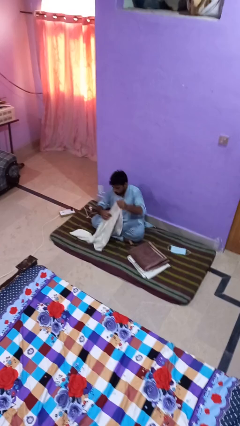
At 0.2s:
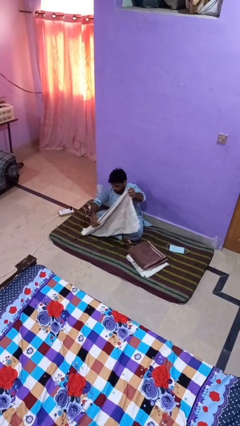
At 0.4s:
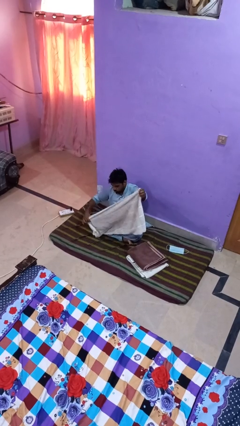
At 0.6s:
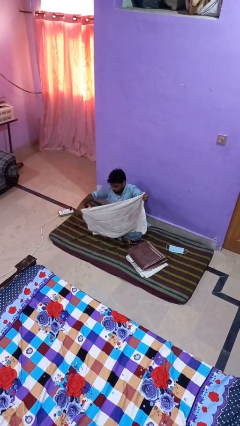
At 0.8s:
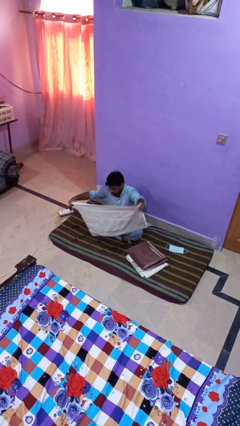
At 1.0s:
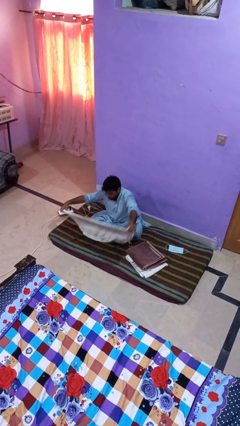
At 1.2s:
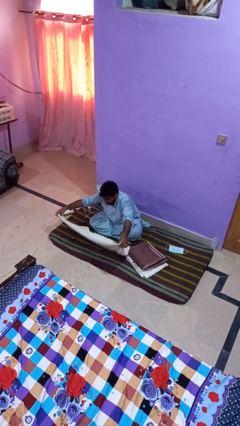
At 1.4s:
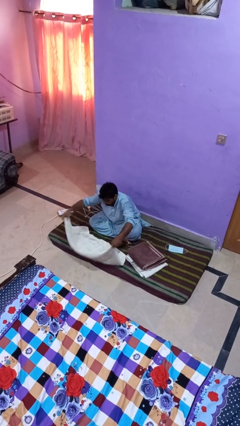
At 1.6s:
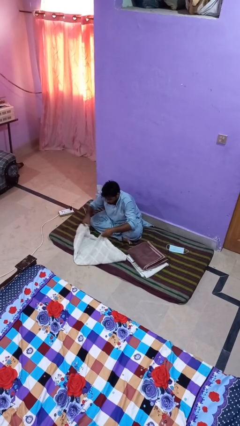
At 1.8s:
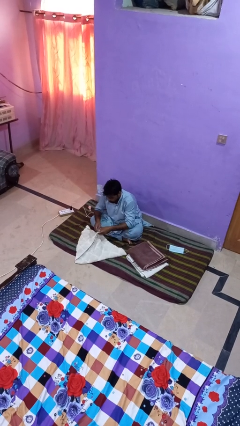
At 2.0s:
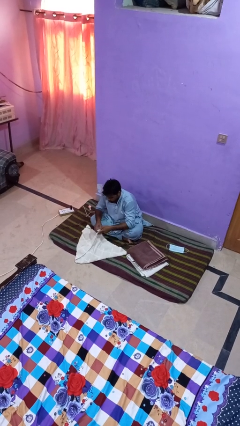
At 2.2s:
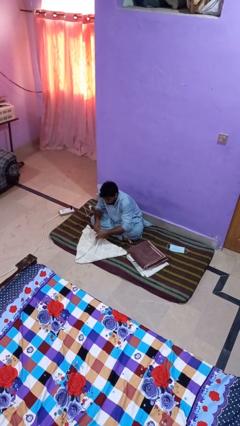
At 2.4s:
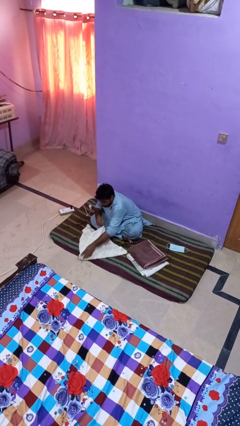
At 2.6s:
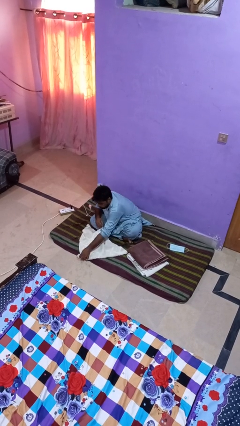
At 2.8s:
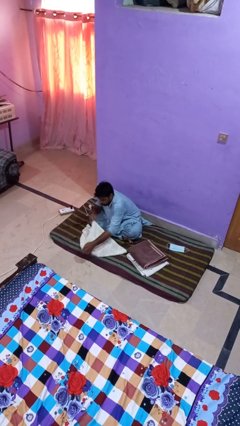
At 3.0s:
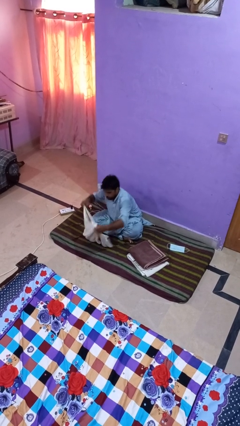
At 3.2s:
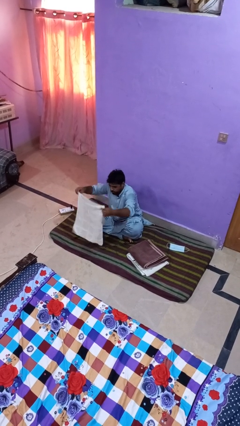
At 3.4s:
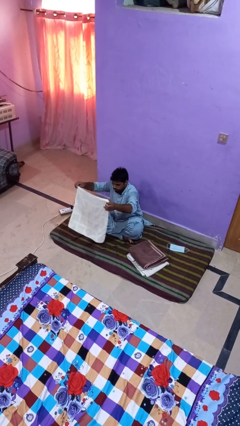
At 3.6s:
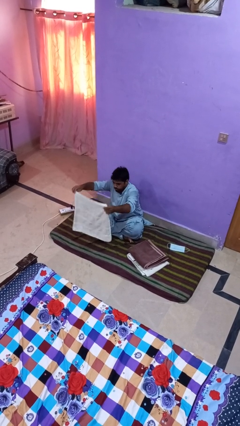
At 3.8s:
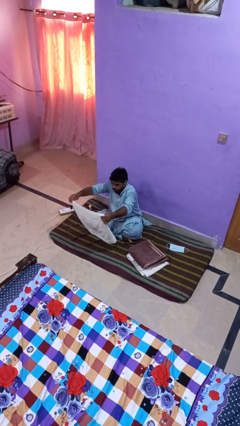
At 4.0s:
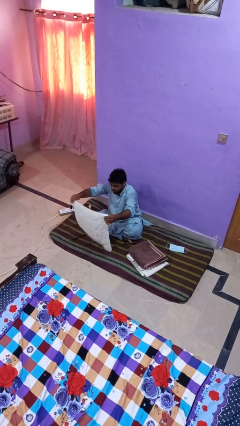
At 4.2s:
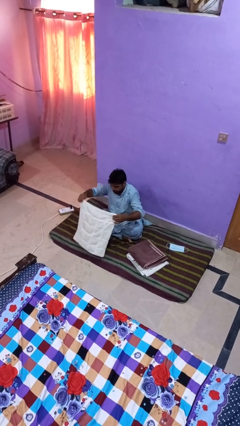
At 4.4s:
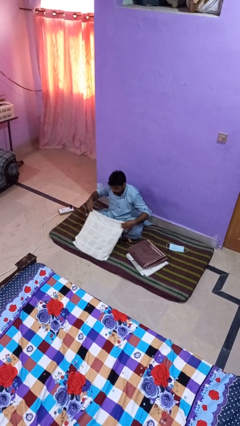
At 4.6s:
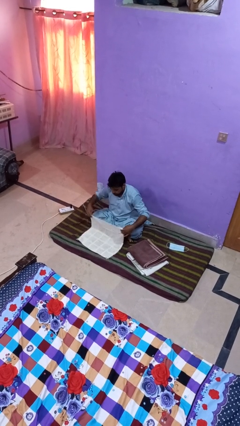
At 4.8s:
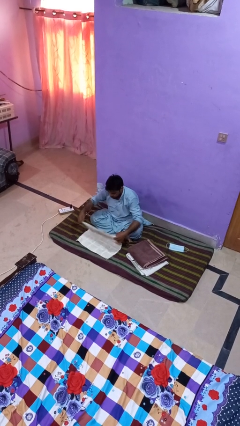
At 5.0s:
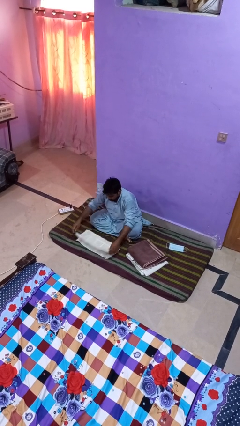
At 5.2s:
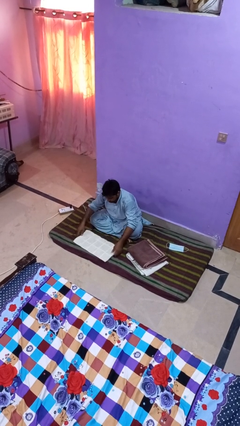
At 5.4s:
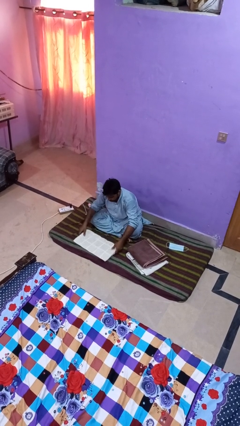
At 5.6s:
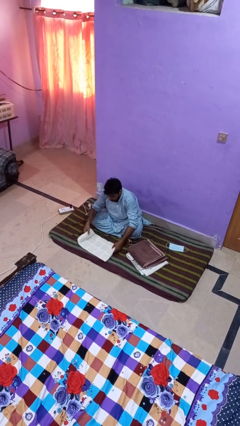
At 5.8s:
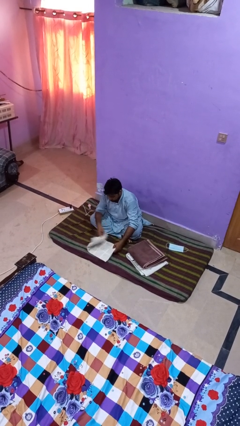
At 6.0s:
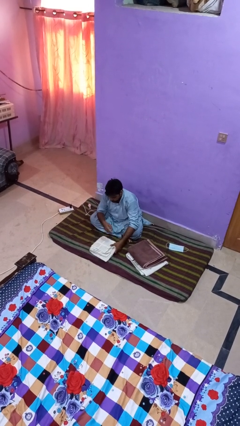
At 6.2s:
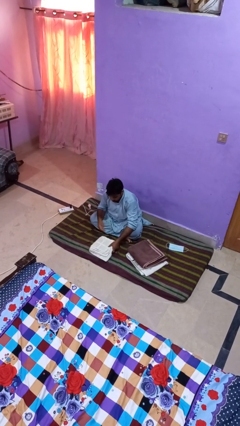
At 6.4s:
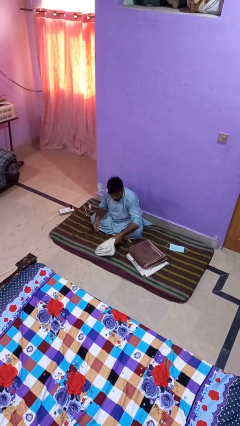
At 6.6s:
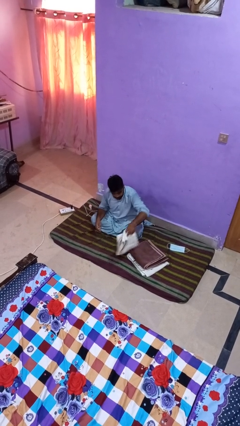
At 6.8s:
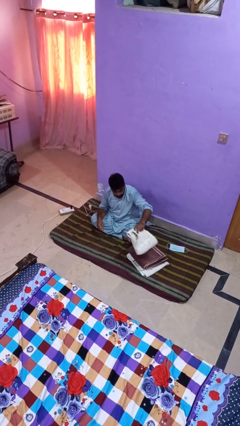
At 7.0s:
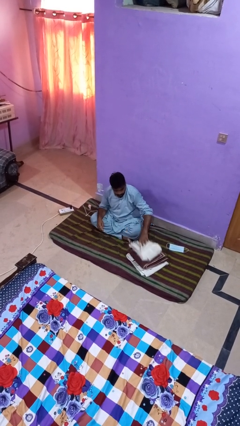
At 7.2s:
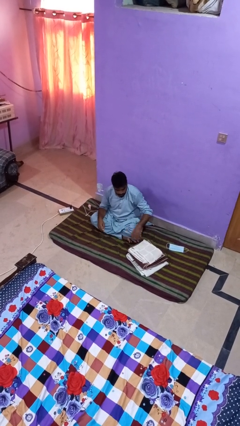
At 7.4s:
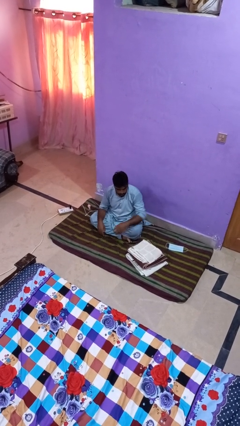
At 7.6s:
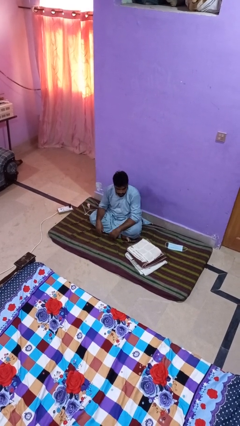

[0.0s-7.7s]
person folds towel

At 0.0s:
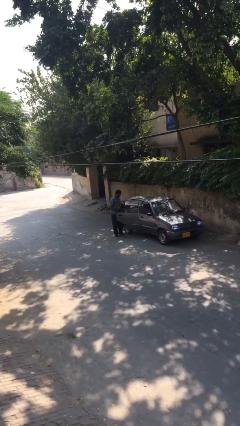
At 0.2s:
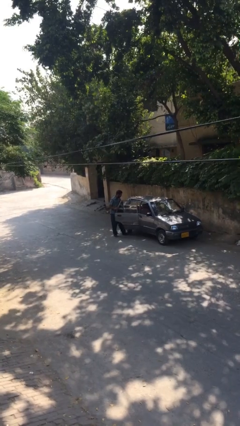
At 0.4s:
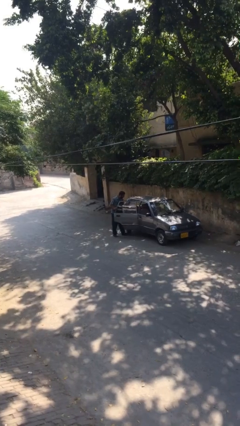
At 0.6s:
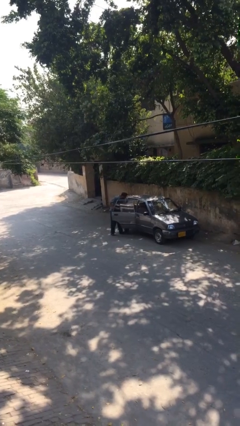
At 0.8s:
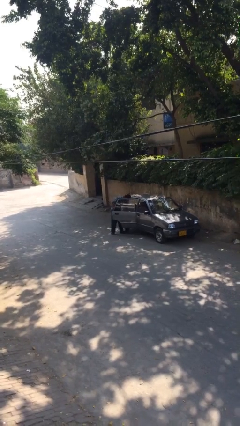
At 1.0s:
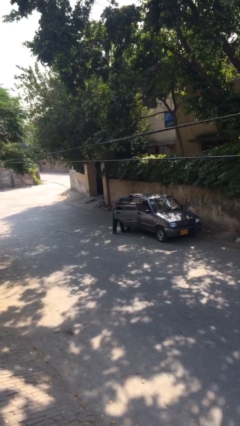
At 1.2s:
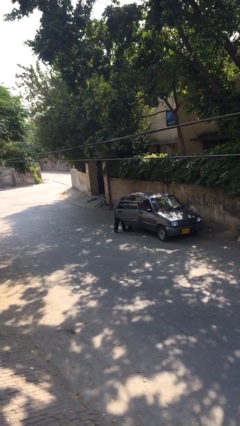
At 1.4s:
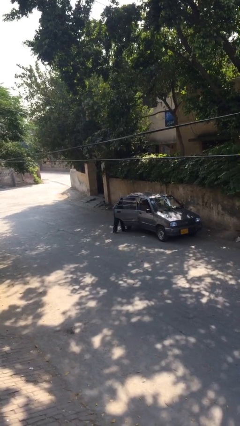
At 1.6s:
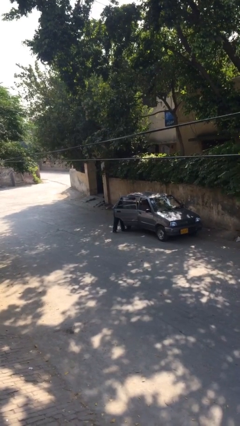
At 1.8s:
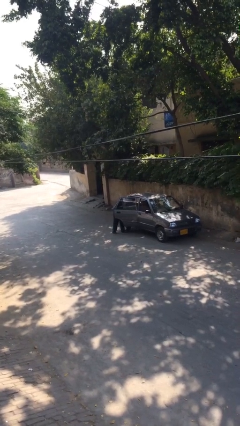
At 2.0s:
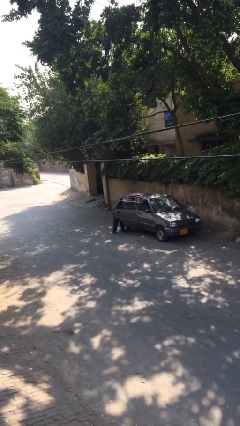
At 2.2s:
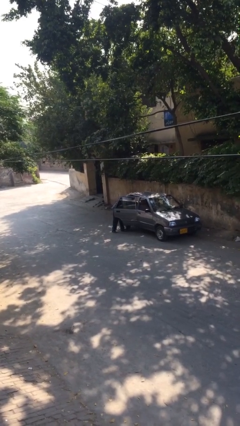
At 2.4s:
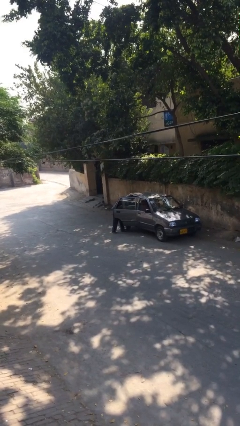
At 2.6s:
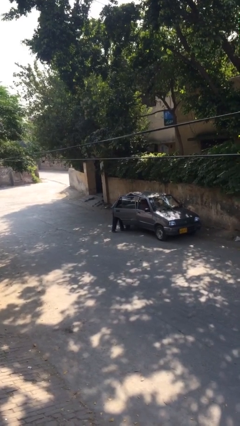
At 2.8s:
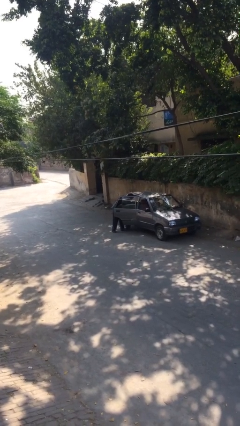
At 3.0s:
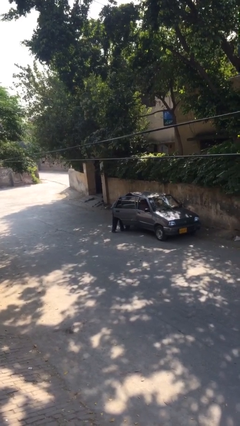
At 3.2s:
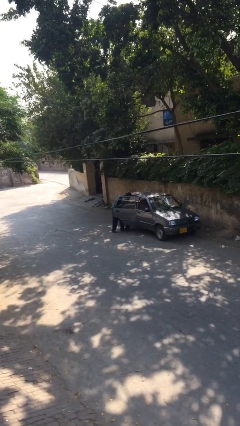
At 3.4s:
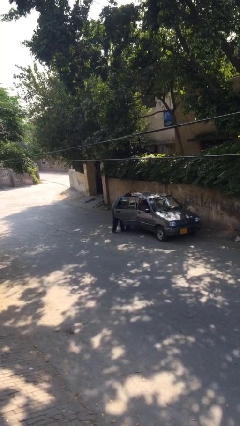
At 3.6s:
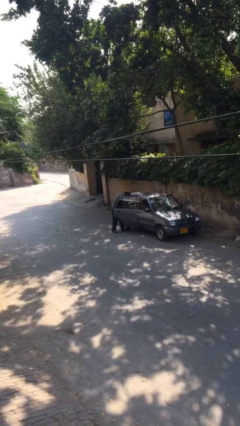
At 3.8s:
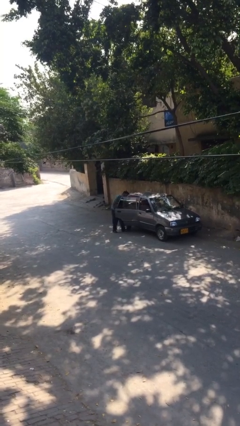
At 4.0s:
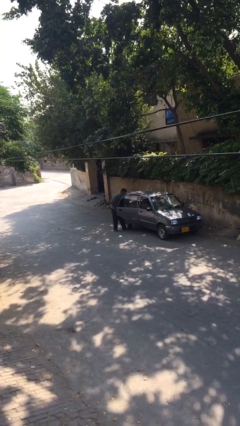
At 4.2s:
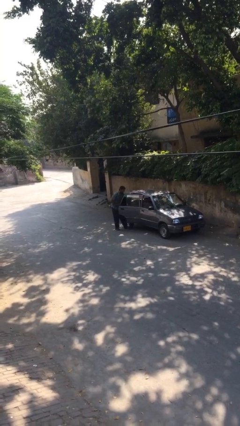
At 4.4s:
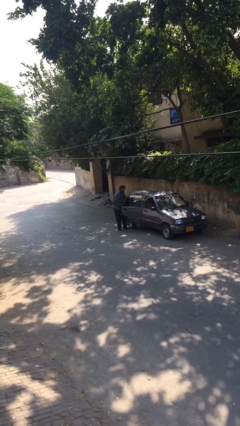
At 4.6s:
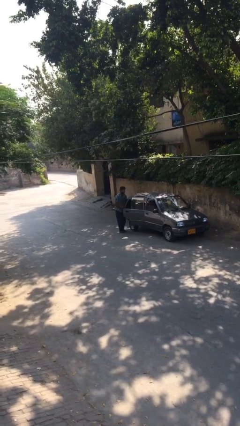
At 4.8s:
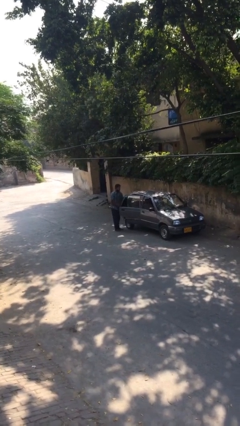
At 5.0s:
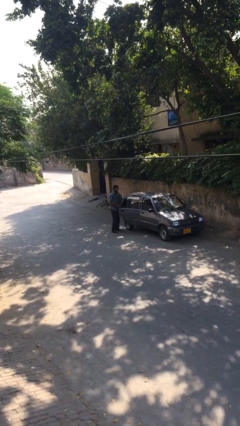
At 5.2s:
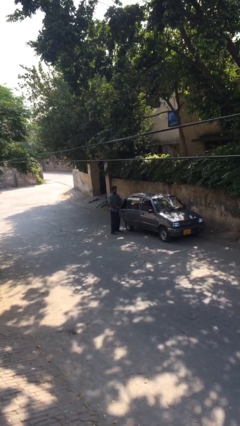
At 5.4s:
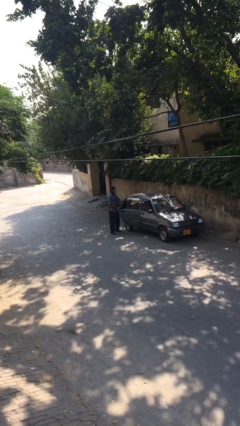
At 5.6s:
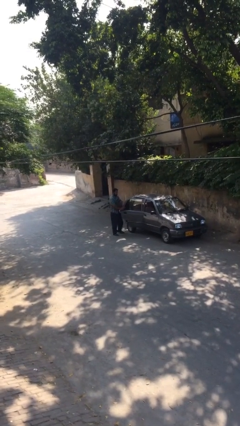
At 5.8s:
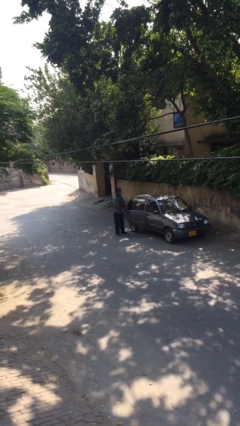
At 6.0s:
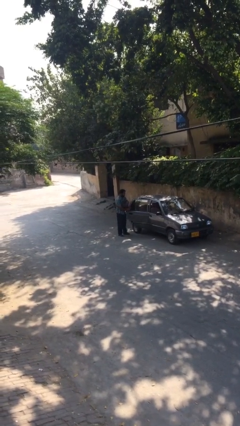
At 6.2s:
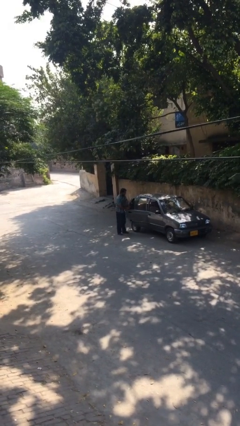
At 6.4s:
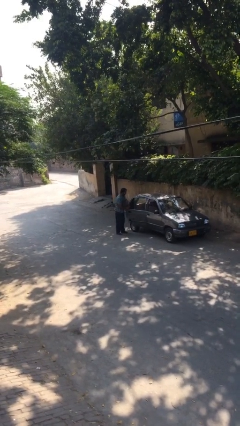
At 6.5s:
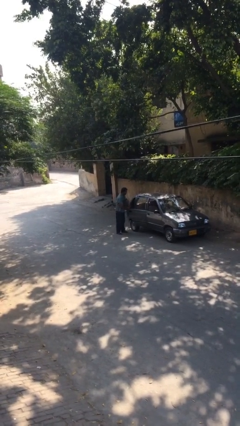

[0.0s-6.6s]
person unloads car

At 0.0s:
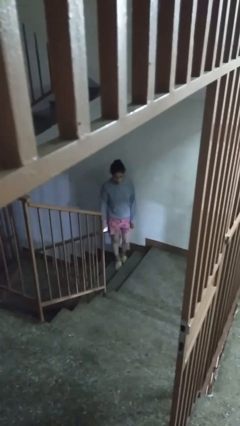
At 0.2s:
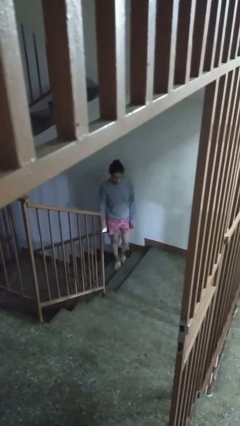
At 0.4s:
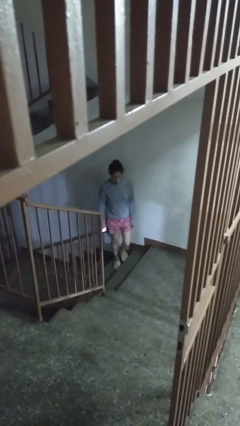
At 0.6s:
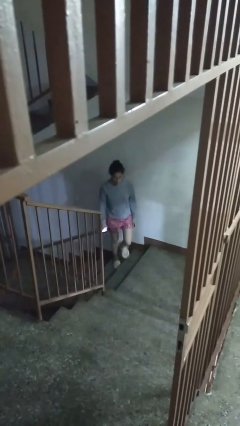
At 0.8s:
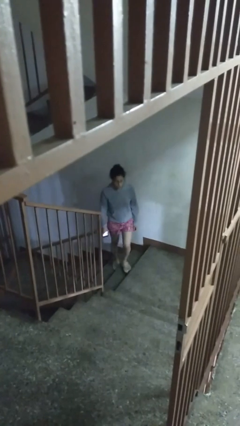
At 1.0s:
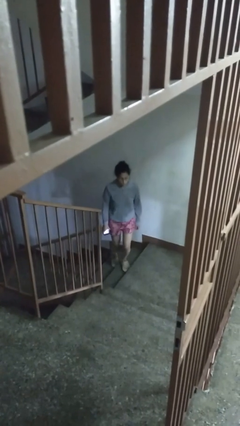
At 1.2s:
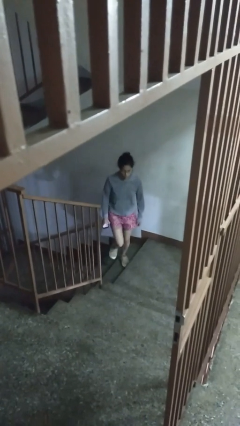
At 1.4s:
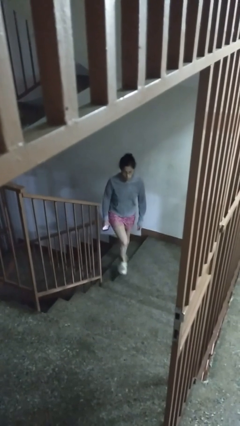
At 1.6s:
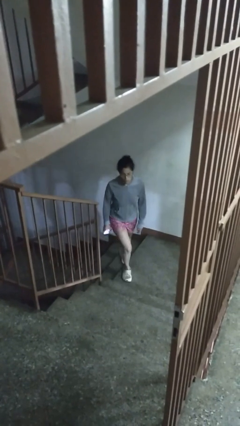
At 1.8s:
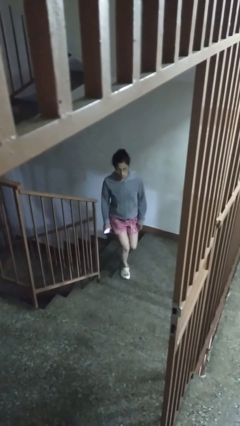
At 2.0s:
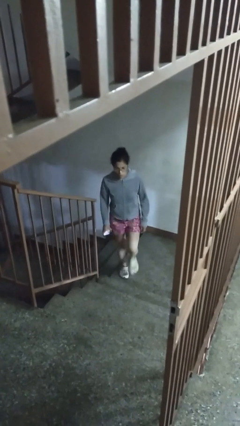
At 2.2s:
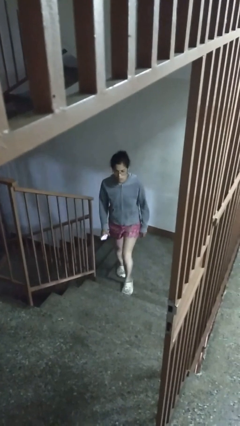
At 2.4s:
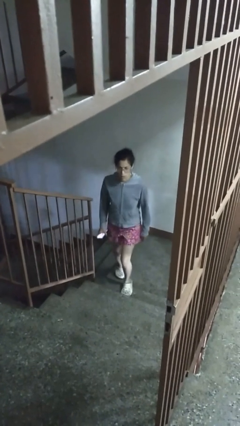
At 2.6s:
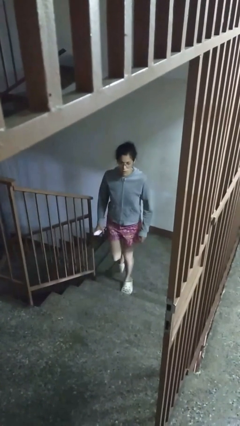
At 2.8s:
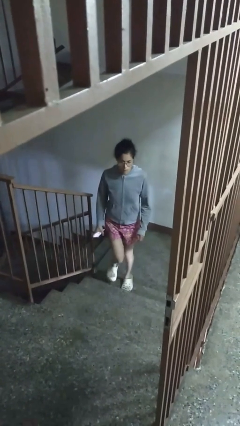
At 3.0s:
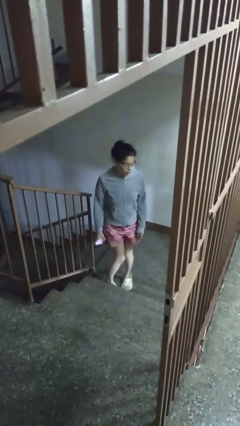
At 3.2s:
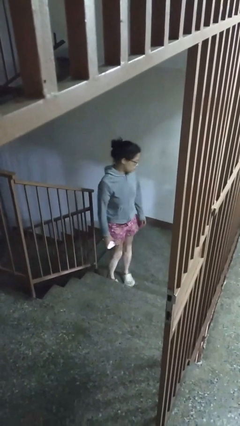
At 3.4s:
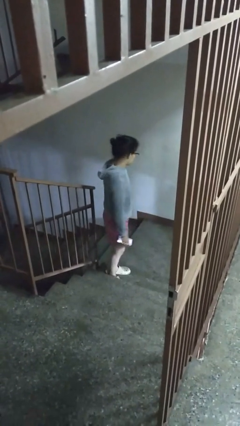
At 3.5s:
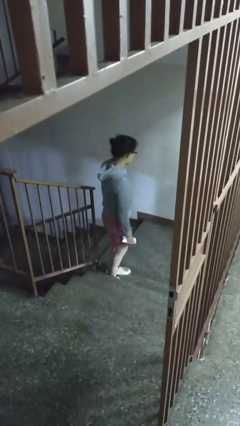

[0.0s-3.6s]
person climbs up stairs

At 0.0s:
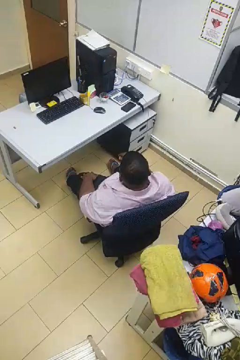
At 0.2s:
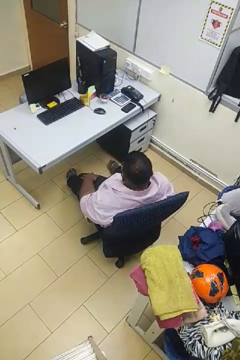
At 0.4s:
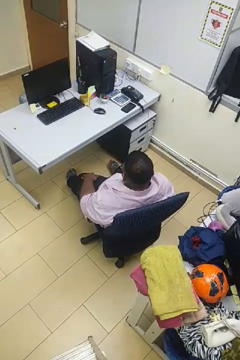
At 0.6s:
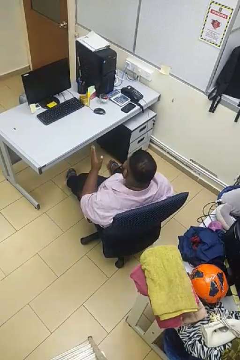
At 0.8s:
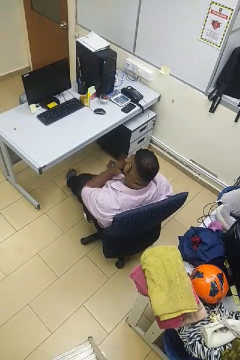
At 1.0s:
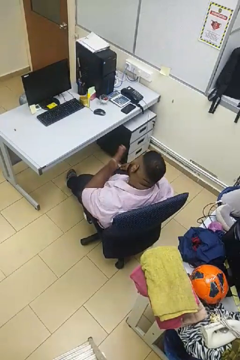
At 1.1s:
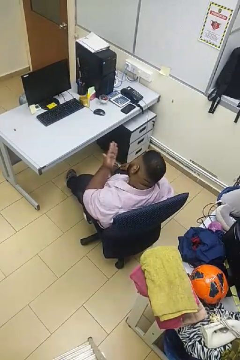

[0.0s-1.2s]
person swats bug
